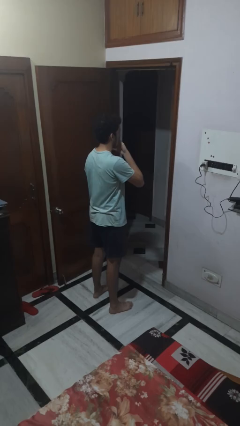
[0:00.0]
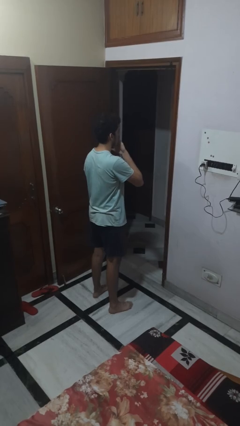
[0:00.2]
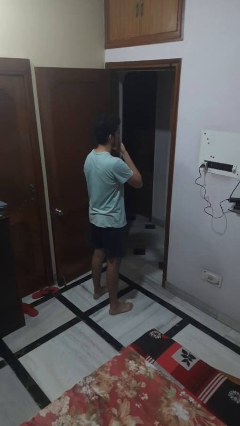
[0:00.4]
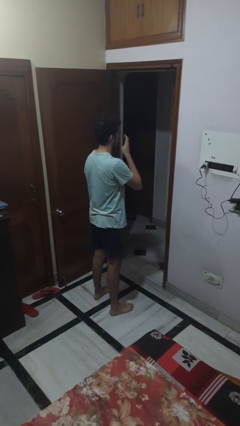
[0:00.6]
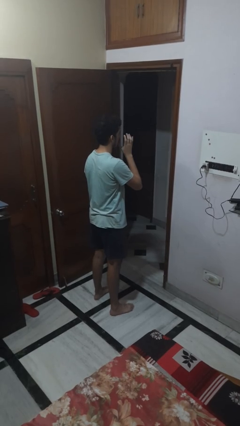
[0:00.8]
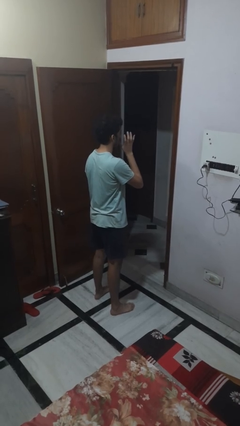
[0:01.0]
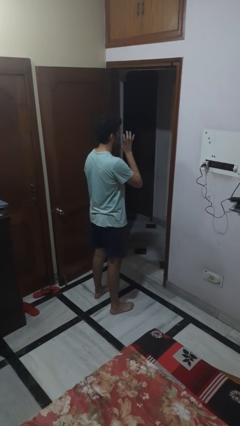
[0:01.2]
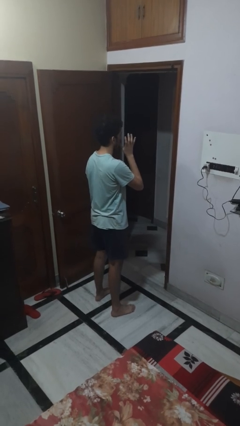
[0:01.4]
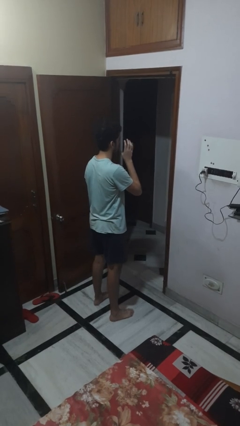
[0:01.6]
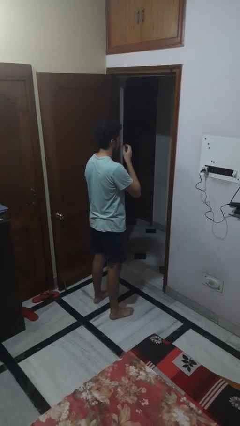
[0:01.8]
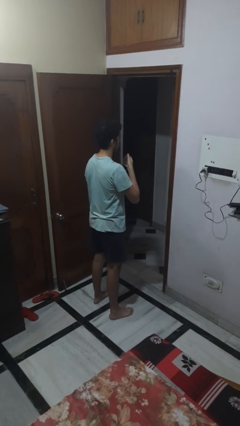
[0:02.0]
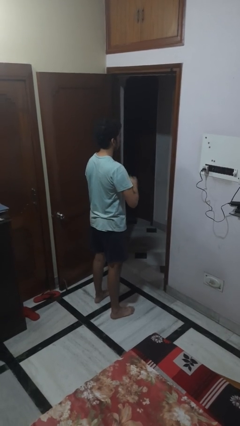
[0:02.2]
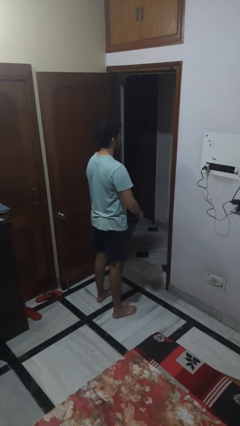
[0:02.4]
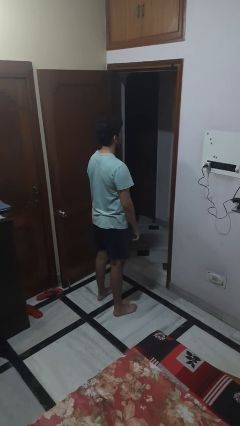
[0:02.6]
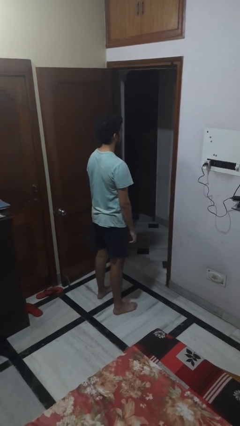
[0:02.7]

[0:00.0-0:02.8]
person licks fingers

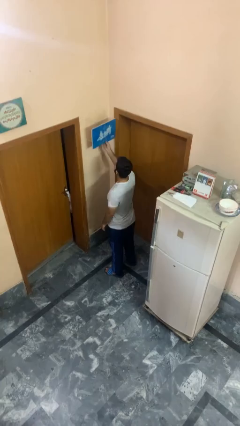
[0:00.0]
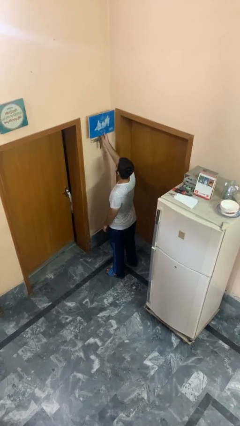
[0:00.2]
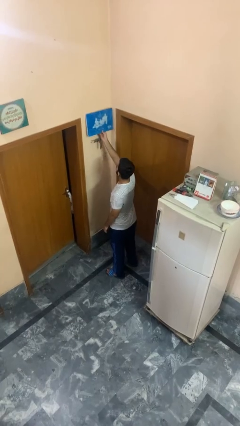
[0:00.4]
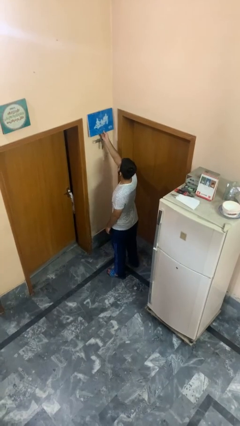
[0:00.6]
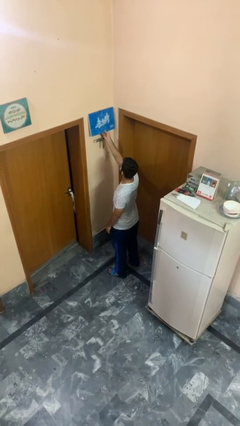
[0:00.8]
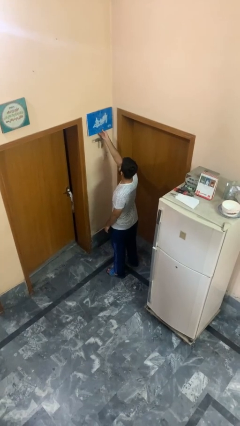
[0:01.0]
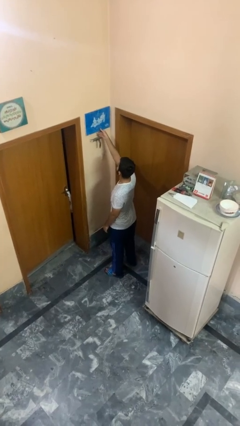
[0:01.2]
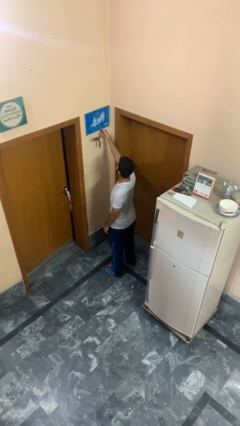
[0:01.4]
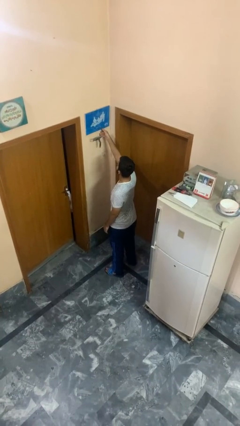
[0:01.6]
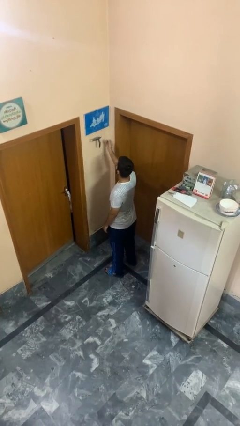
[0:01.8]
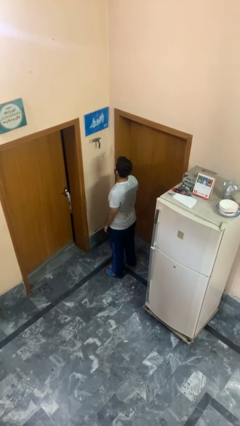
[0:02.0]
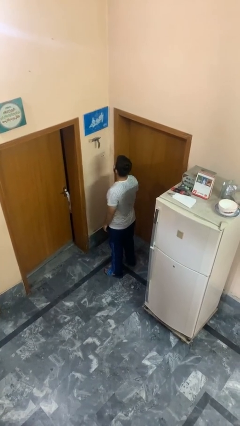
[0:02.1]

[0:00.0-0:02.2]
person puts up picture frame

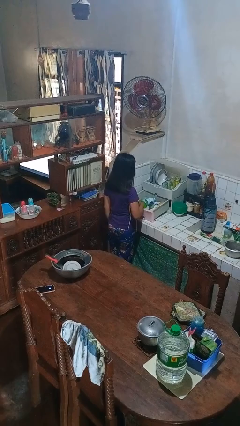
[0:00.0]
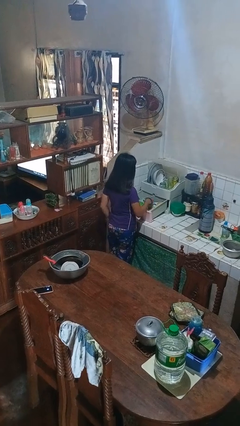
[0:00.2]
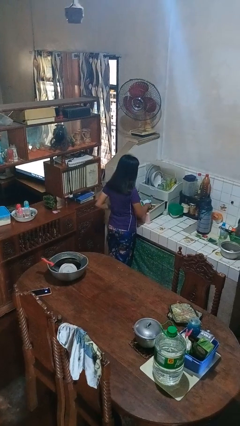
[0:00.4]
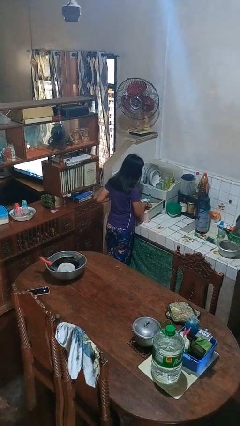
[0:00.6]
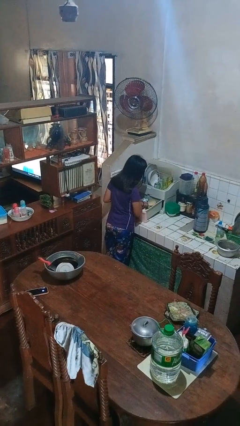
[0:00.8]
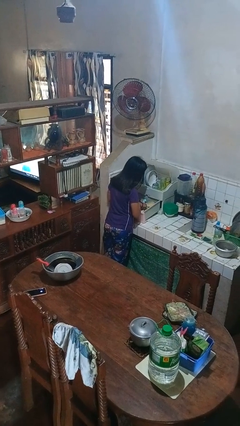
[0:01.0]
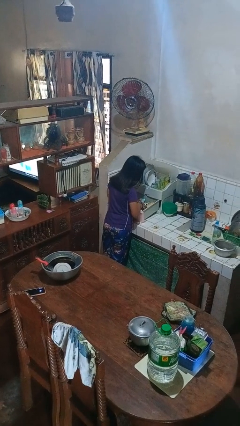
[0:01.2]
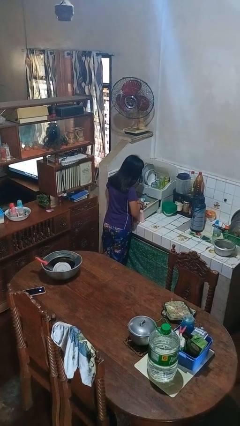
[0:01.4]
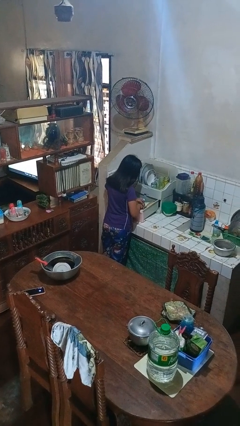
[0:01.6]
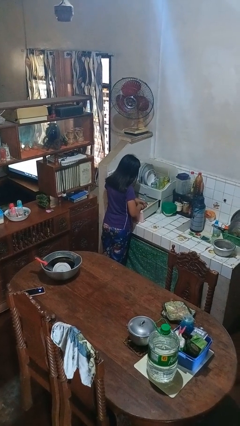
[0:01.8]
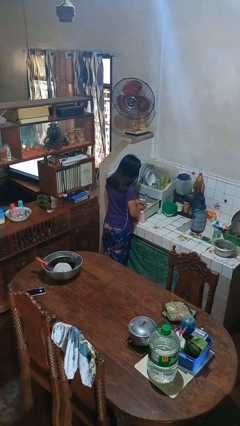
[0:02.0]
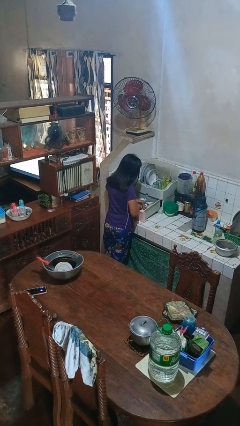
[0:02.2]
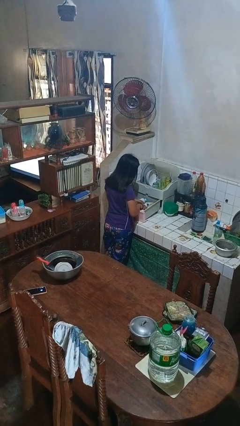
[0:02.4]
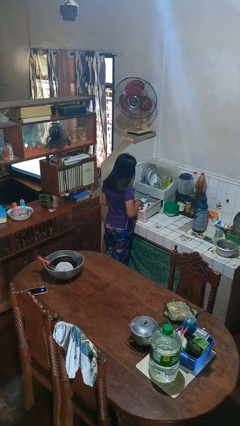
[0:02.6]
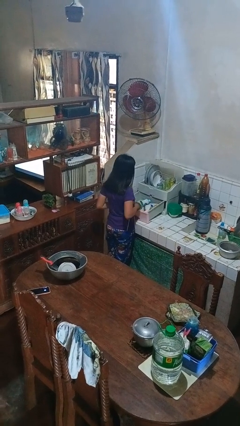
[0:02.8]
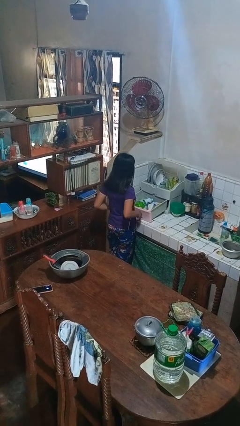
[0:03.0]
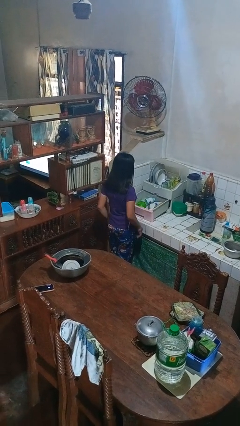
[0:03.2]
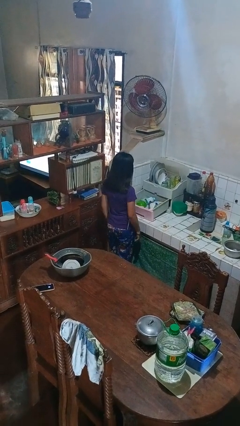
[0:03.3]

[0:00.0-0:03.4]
person searches in kitchen drawer

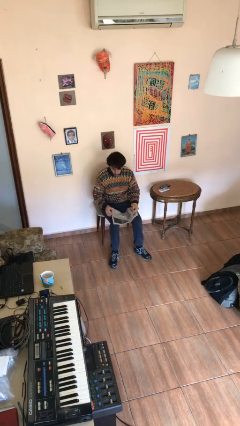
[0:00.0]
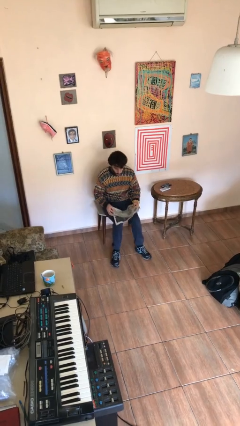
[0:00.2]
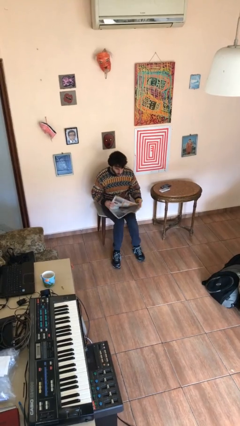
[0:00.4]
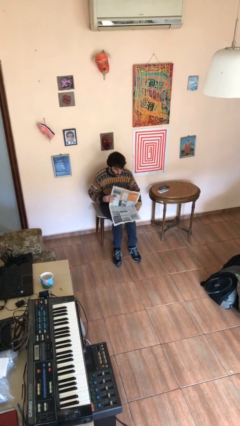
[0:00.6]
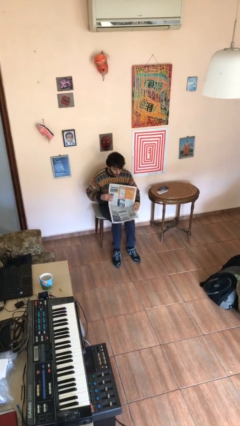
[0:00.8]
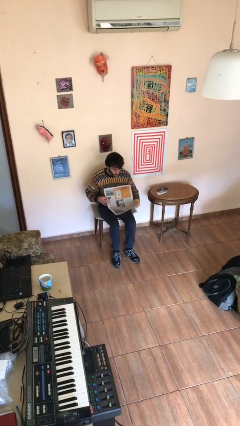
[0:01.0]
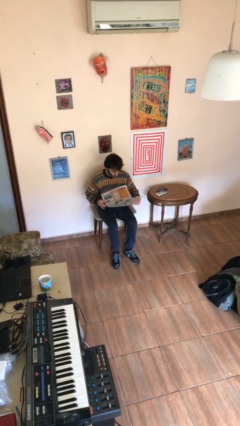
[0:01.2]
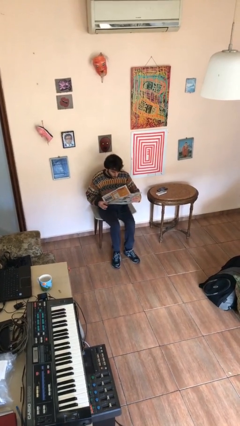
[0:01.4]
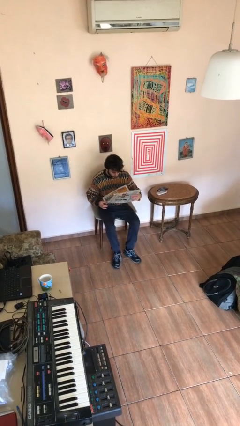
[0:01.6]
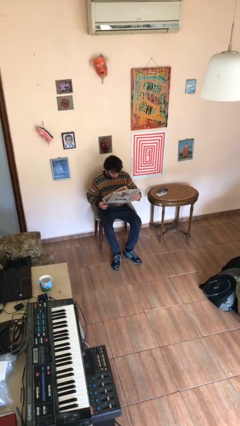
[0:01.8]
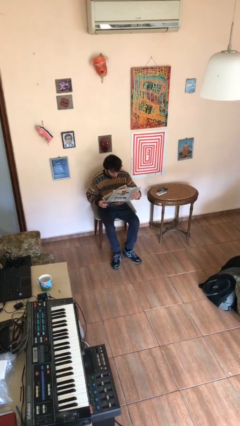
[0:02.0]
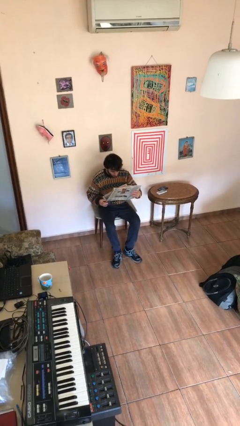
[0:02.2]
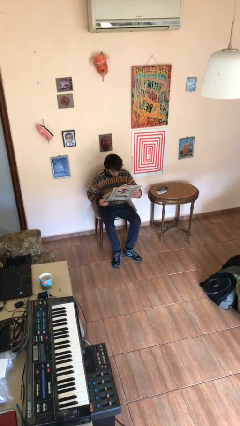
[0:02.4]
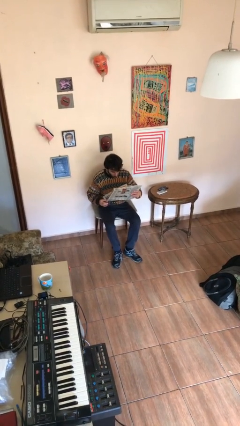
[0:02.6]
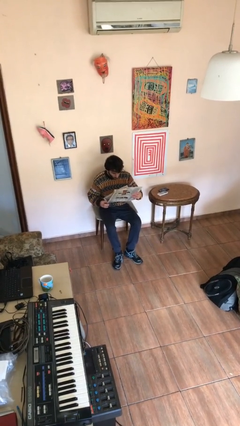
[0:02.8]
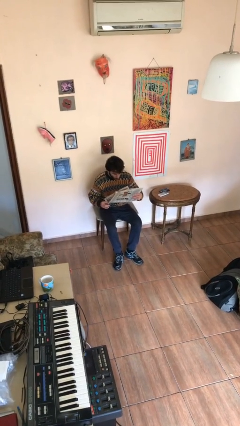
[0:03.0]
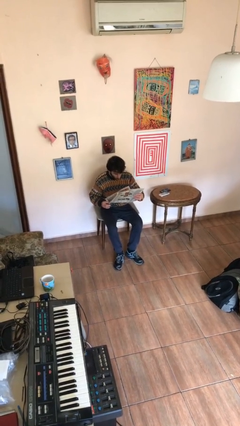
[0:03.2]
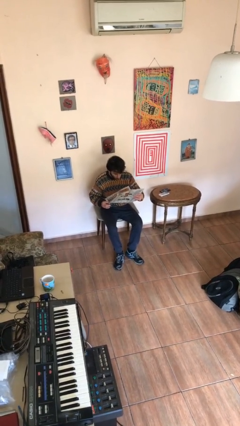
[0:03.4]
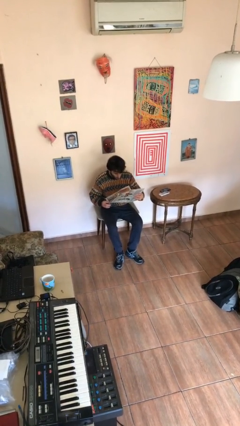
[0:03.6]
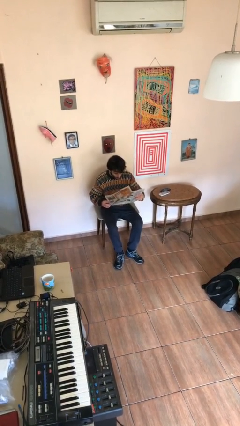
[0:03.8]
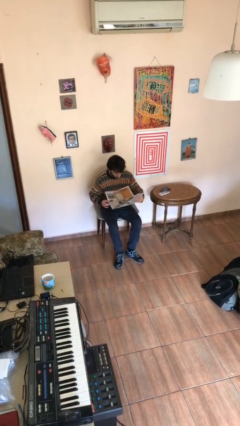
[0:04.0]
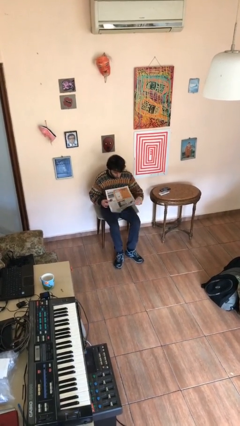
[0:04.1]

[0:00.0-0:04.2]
person reads newspaper

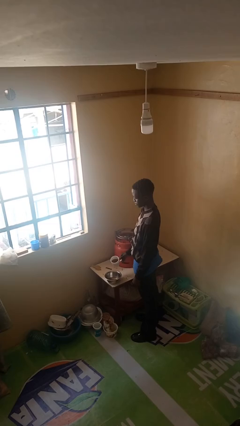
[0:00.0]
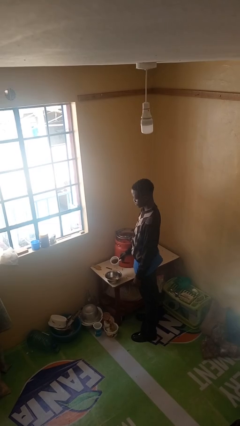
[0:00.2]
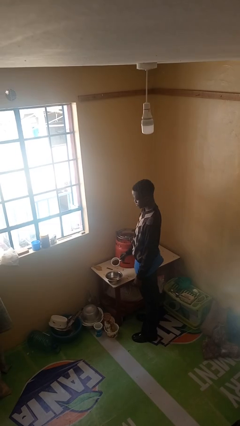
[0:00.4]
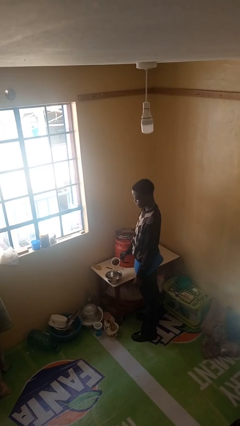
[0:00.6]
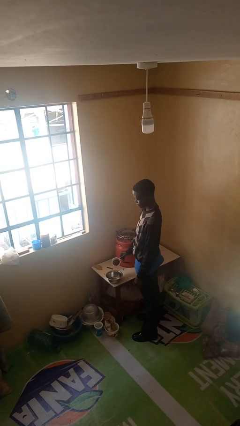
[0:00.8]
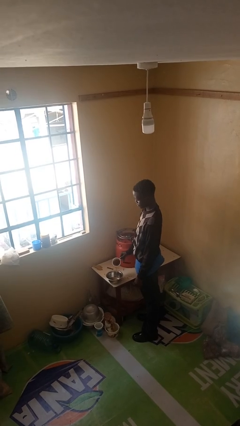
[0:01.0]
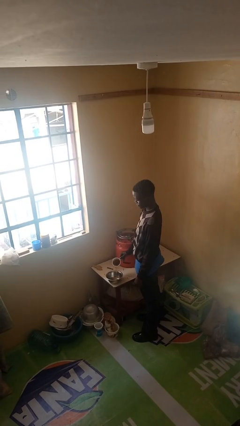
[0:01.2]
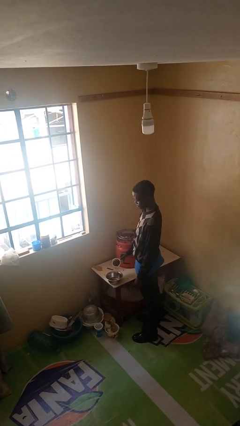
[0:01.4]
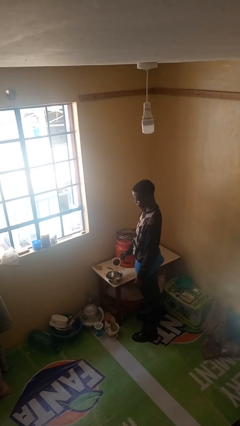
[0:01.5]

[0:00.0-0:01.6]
person pours into bowl

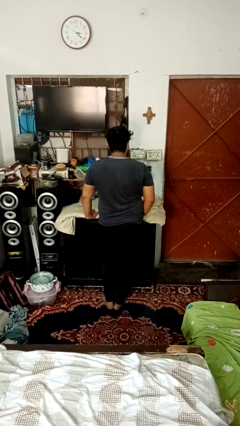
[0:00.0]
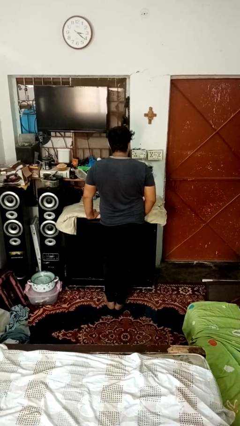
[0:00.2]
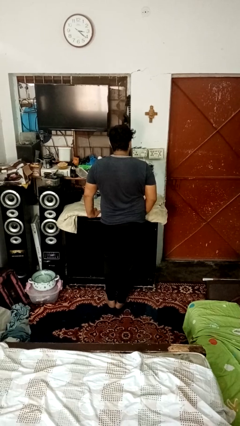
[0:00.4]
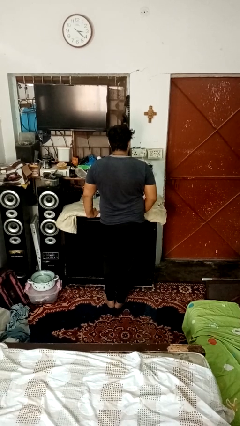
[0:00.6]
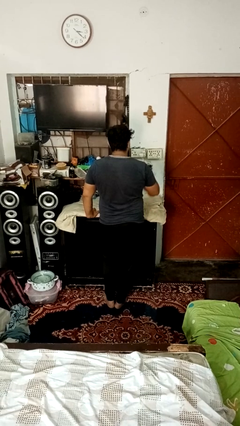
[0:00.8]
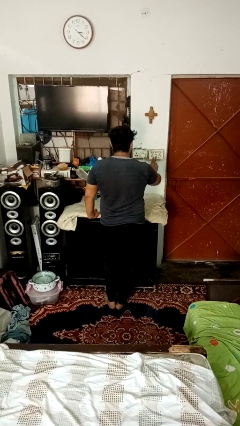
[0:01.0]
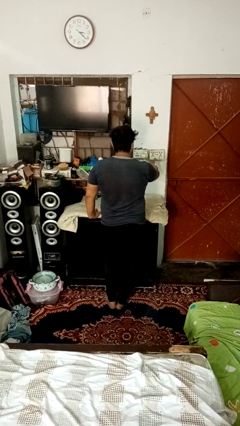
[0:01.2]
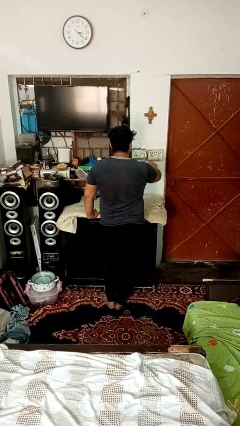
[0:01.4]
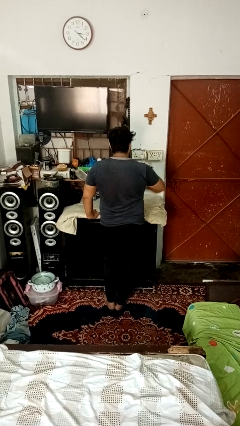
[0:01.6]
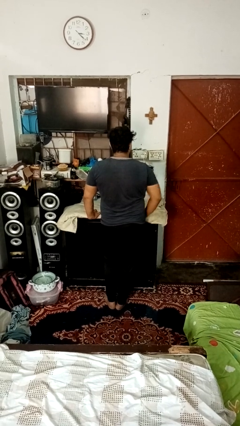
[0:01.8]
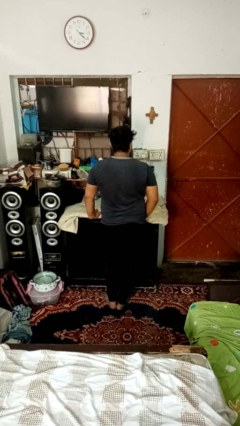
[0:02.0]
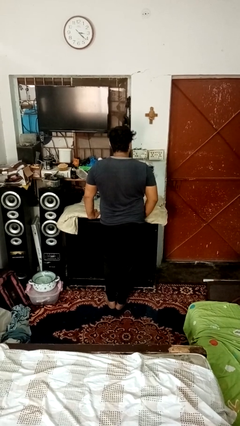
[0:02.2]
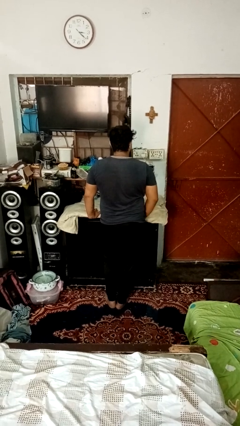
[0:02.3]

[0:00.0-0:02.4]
person turns on fan

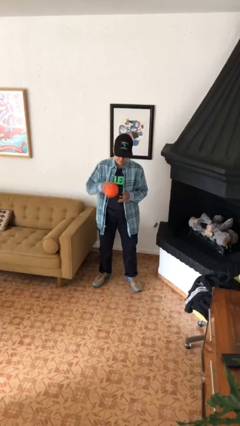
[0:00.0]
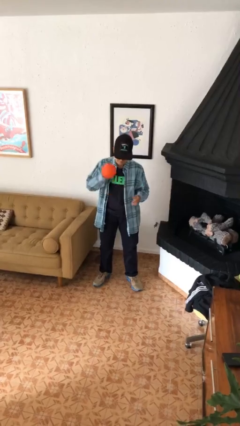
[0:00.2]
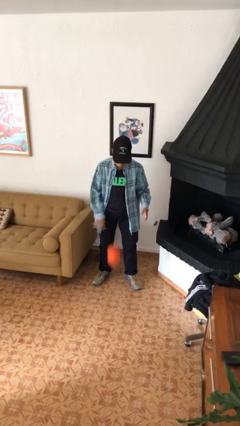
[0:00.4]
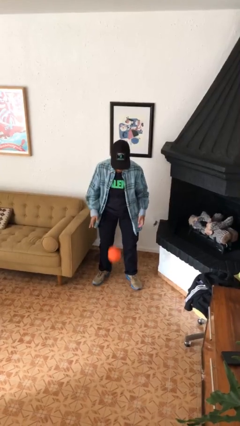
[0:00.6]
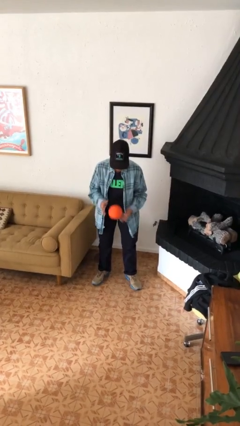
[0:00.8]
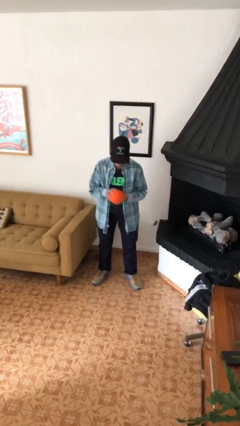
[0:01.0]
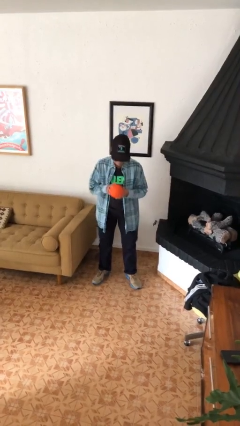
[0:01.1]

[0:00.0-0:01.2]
person bounces ball on floor
